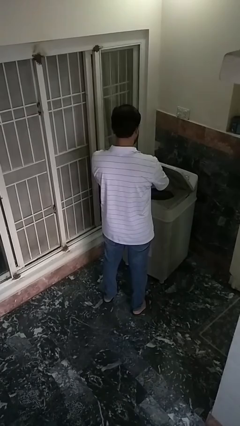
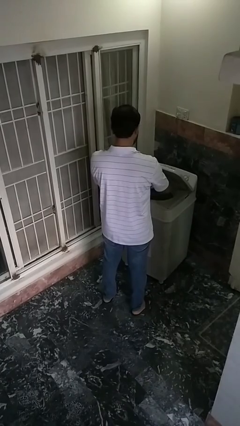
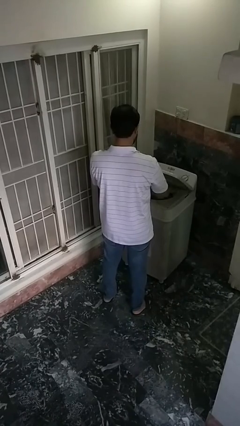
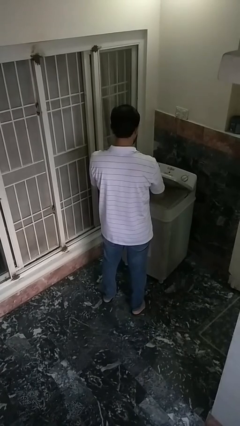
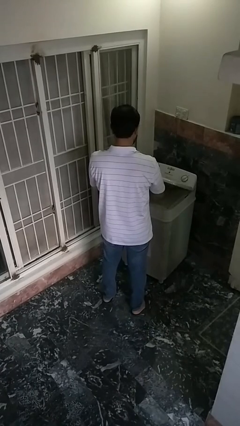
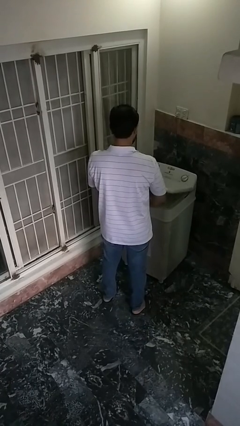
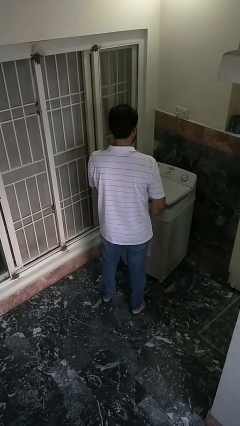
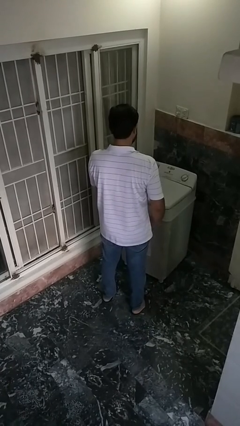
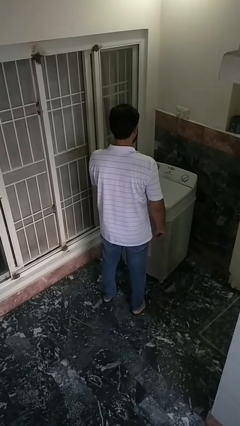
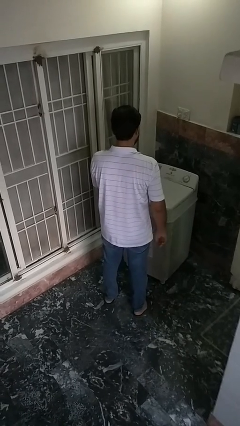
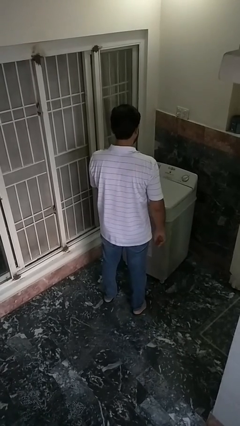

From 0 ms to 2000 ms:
person closes clothes washer

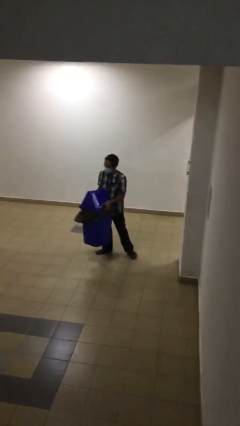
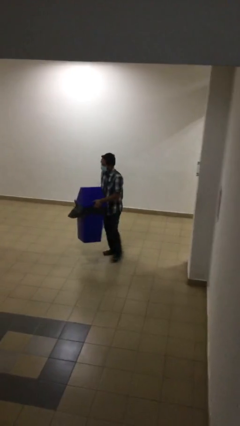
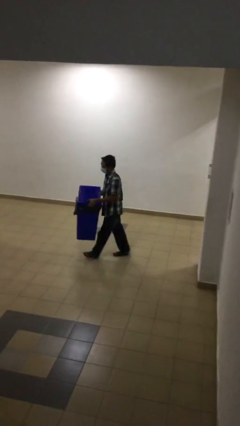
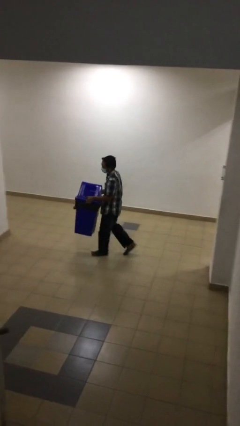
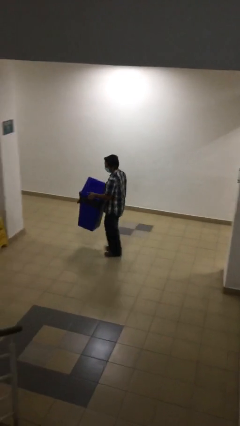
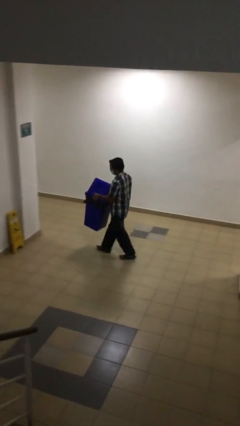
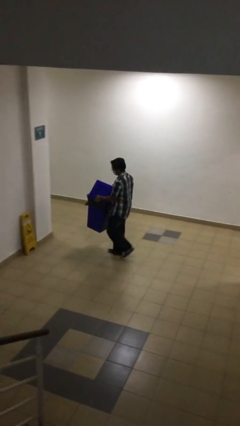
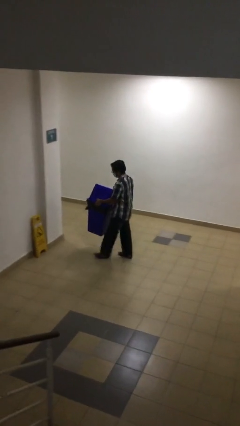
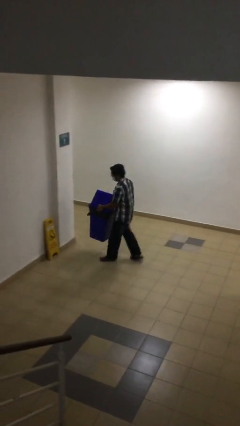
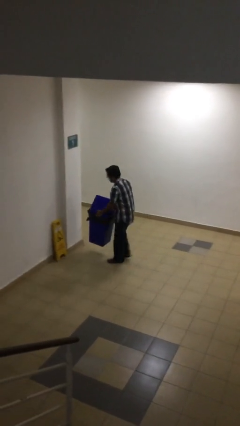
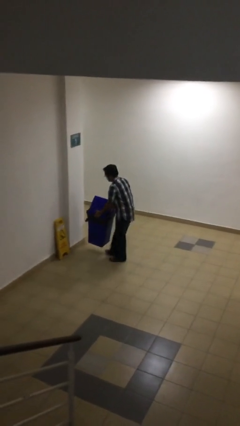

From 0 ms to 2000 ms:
person carries heavy object

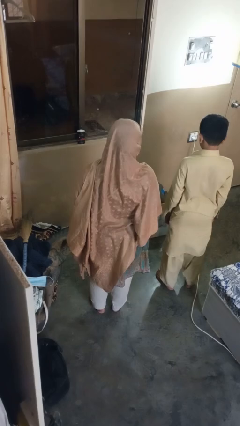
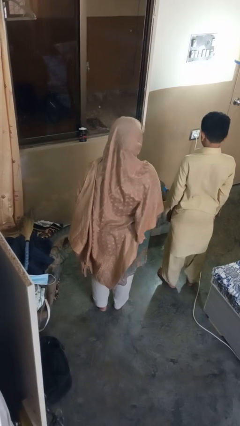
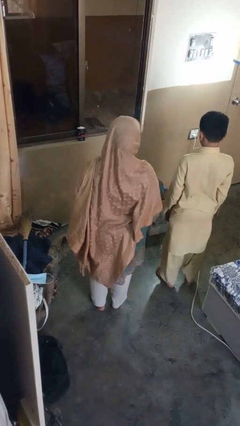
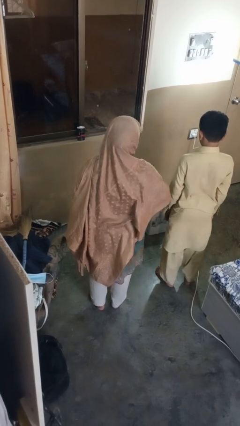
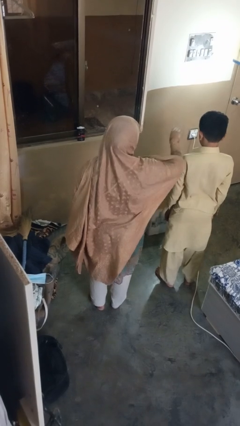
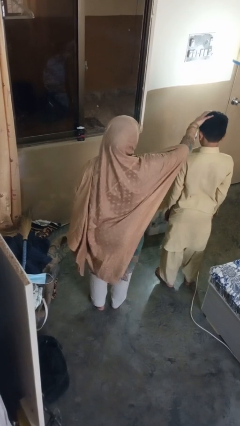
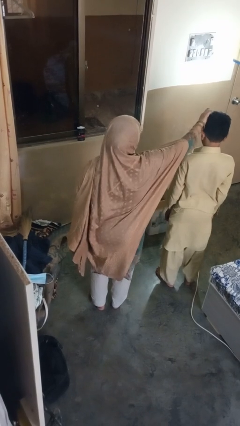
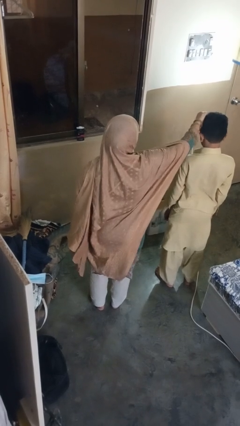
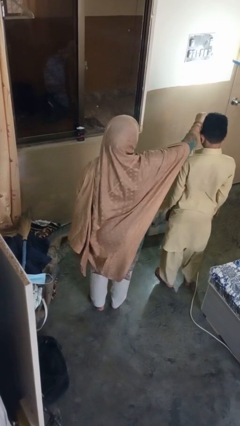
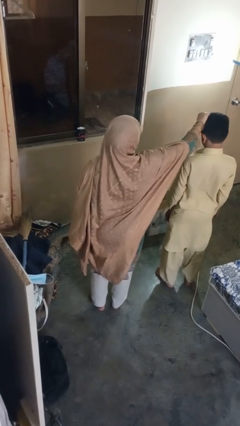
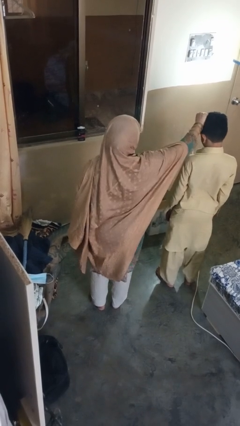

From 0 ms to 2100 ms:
person grabs person by hair

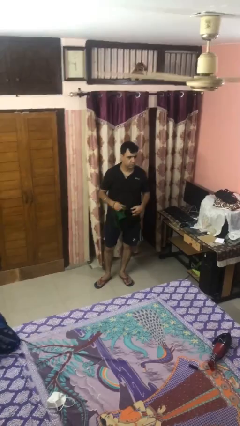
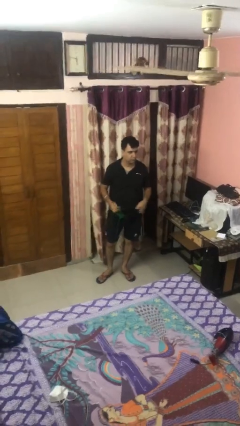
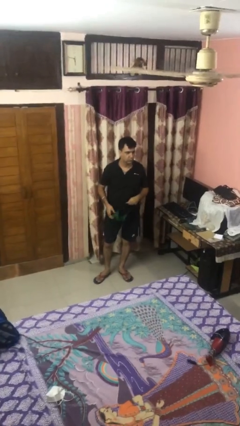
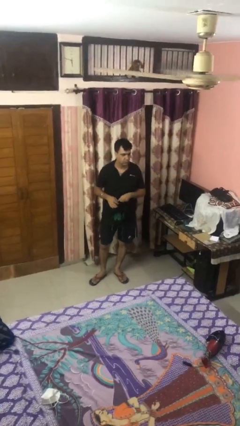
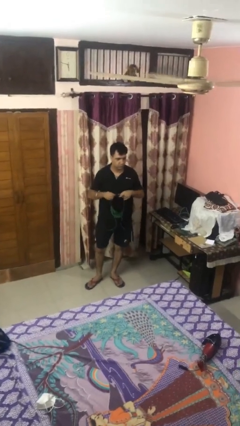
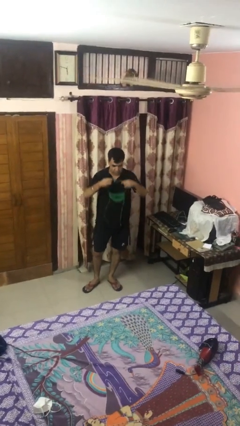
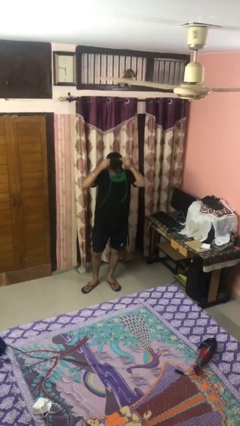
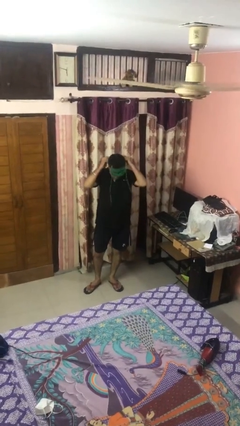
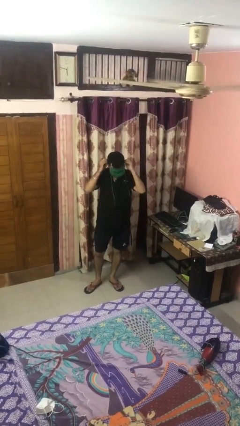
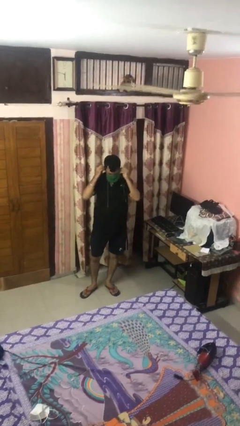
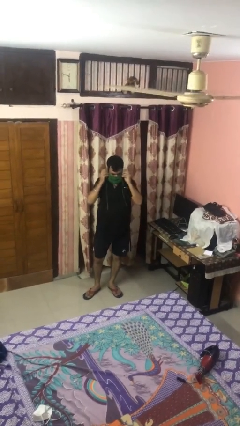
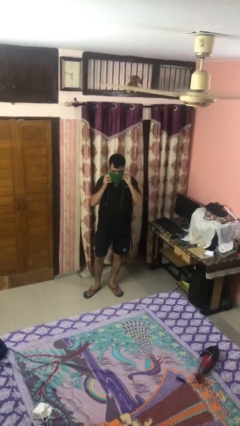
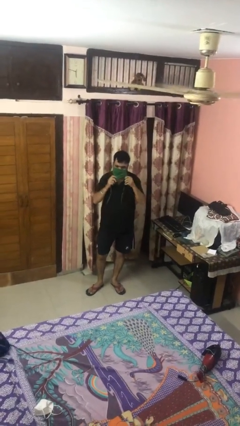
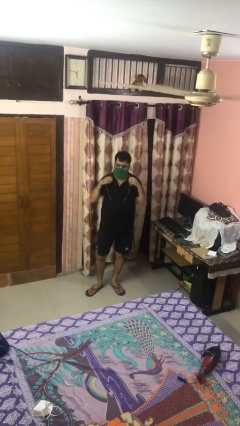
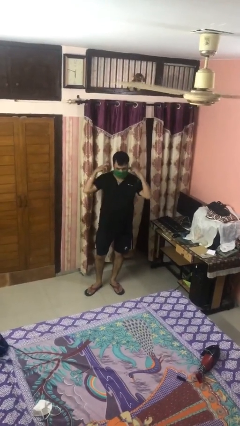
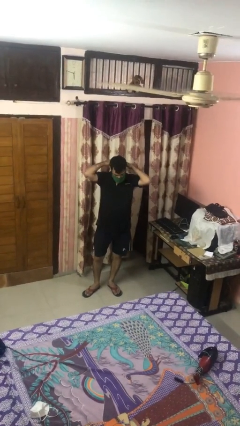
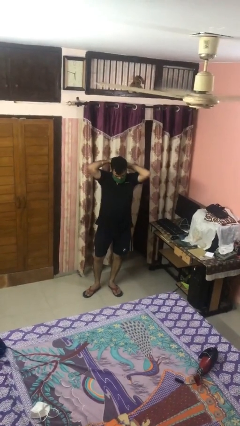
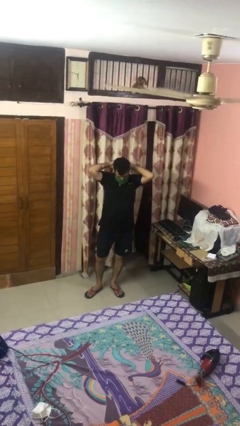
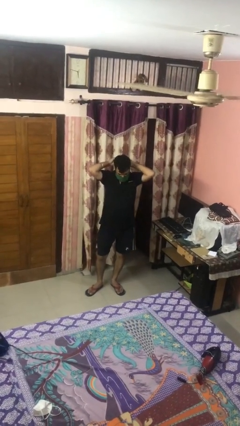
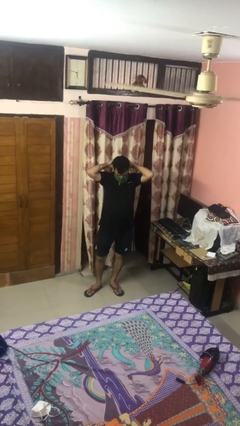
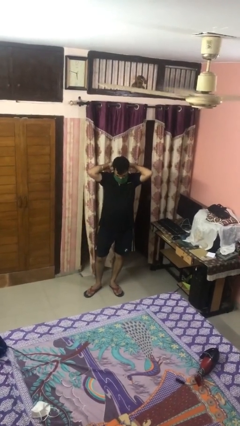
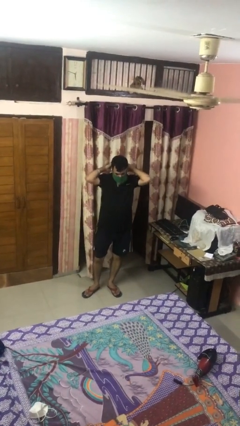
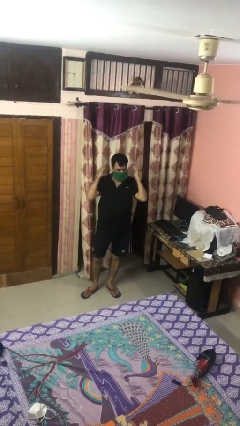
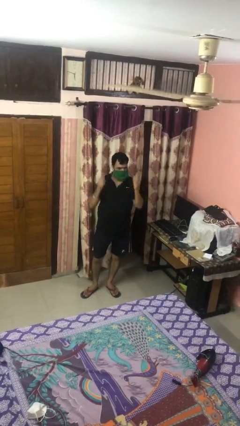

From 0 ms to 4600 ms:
person puts on facemask

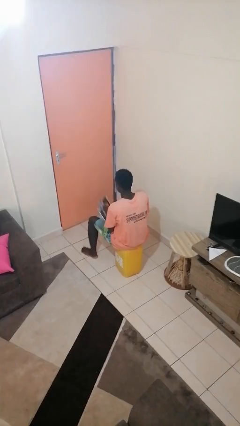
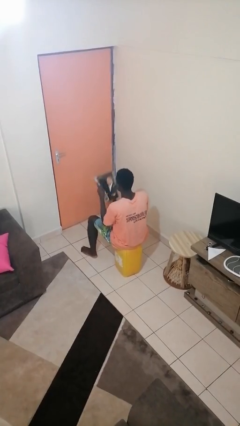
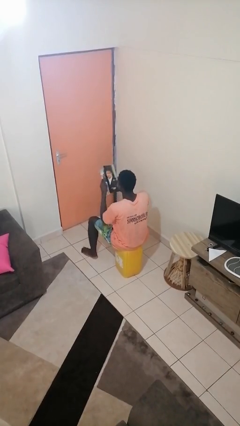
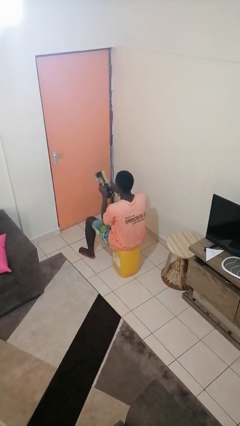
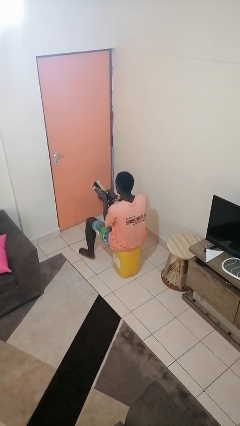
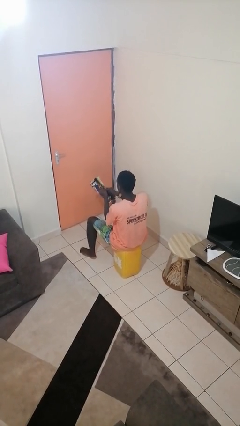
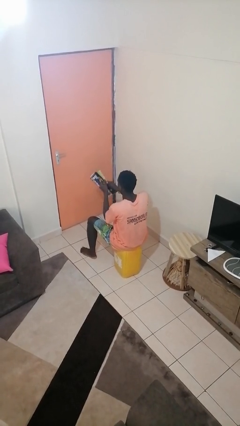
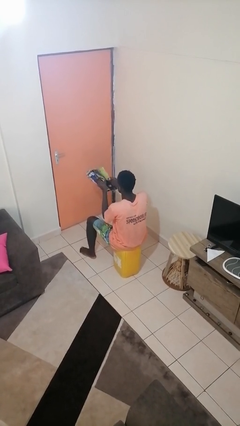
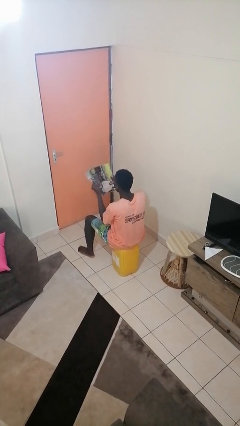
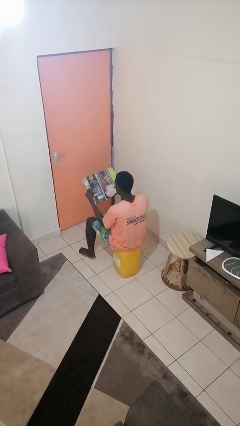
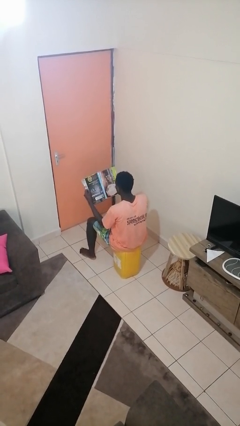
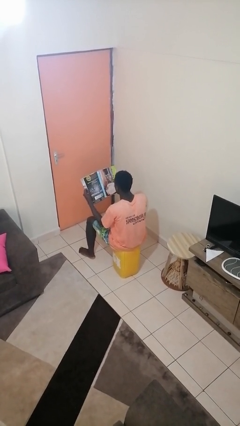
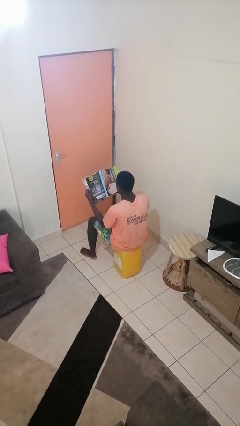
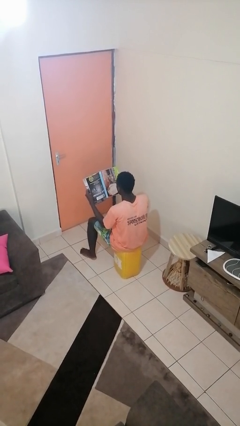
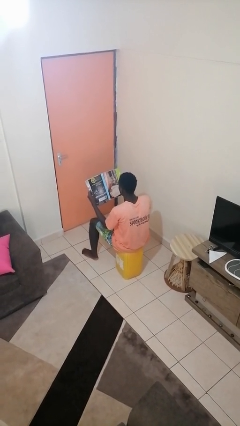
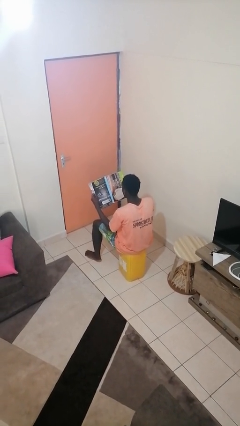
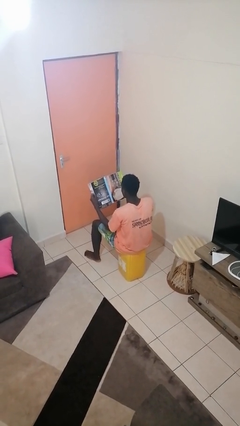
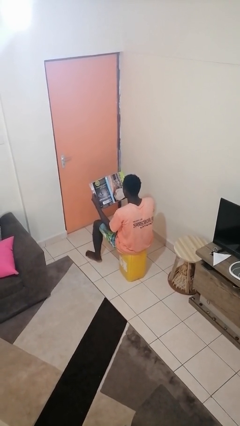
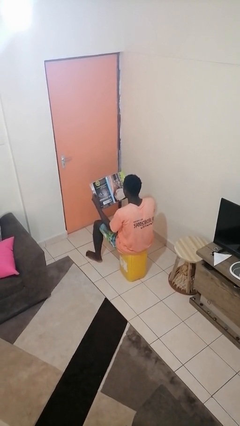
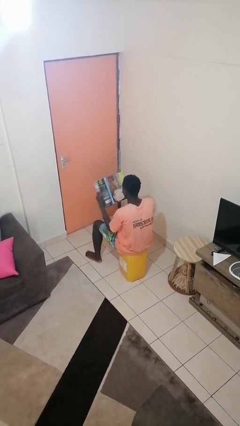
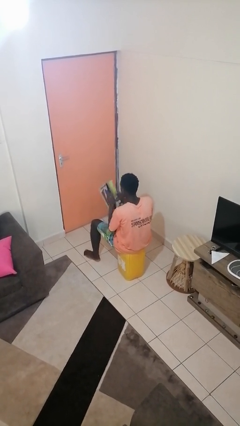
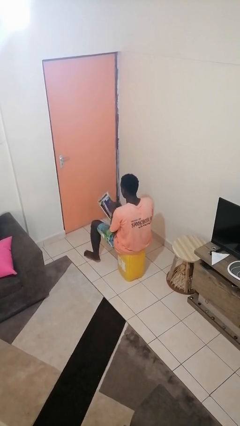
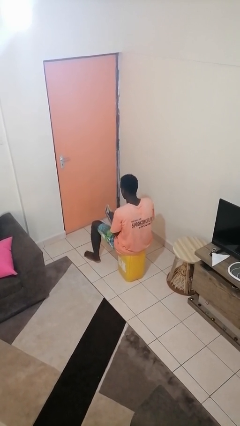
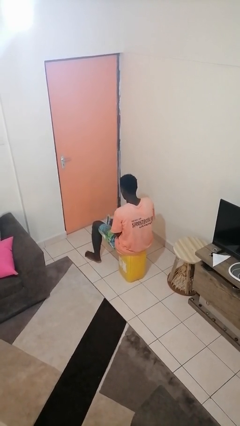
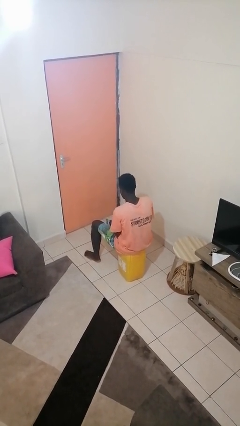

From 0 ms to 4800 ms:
person reads magazine

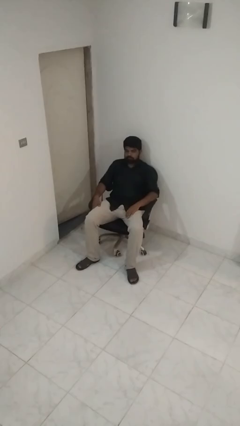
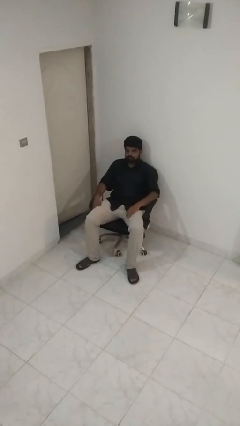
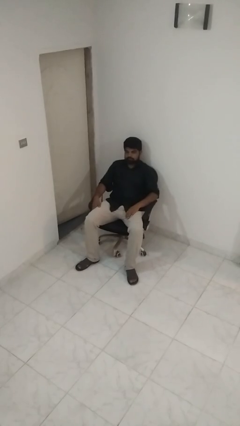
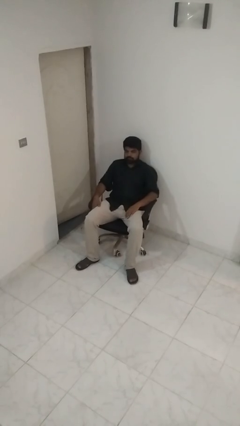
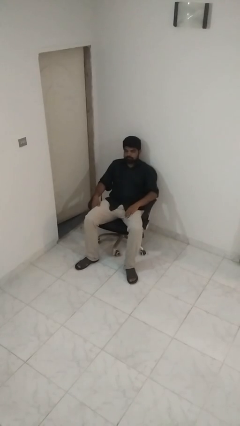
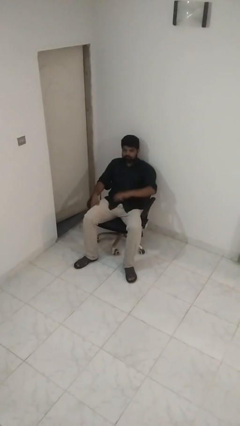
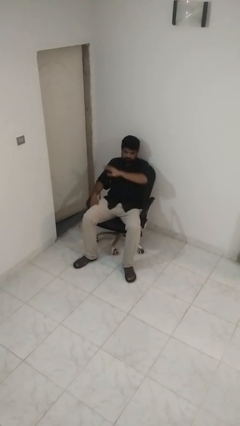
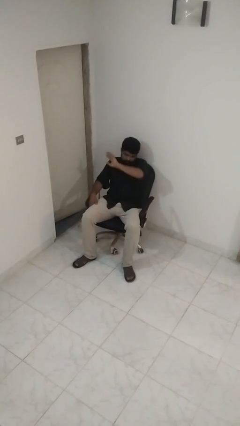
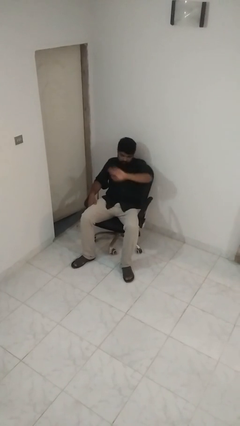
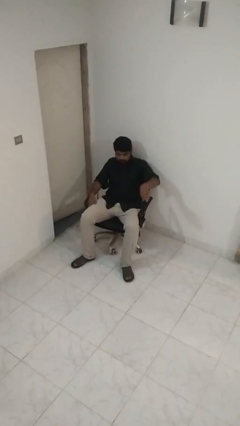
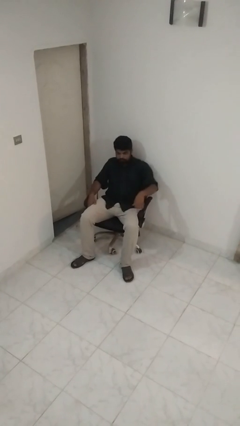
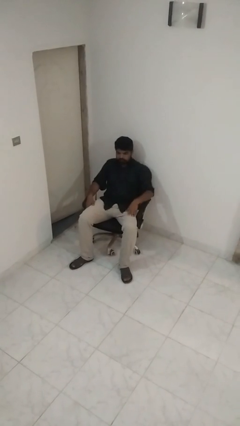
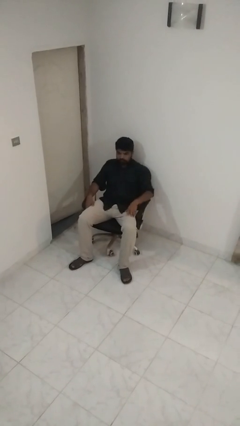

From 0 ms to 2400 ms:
person gestures swipe left
